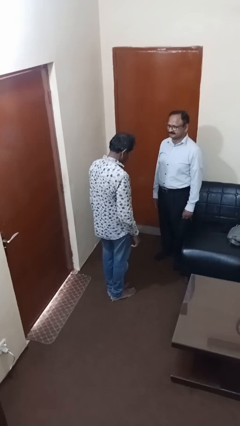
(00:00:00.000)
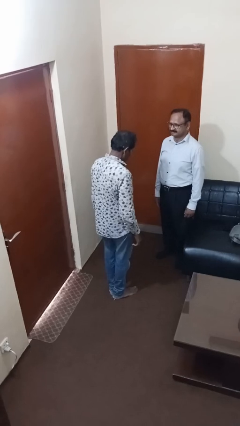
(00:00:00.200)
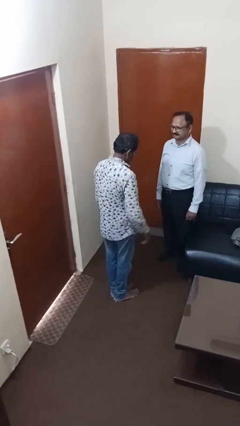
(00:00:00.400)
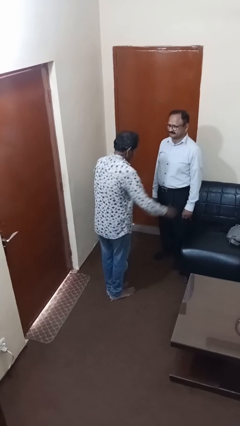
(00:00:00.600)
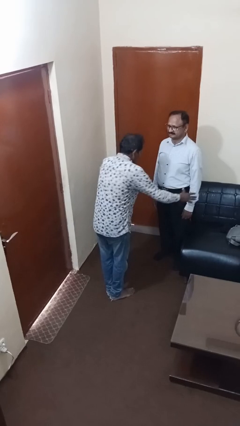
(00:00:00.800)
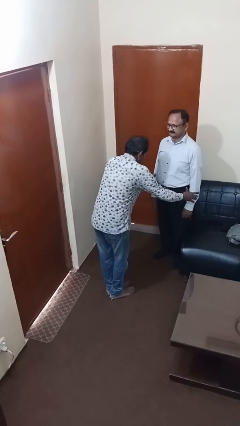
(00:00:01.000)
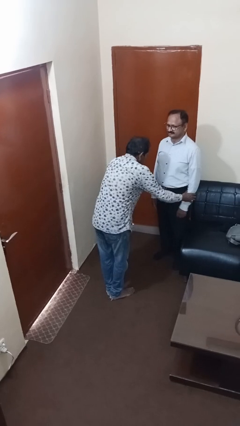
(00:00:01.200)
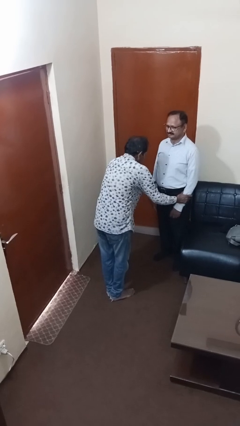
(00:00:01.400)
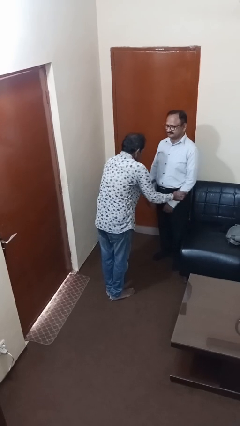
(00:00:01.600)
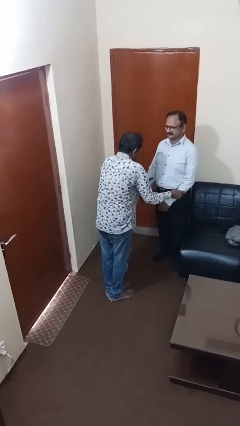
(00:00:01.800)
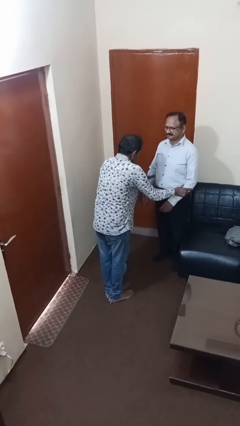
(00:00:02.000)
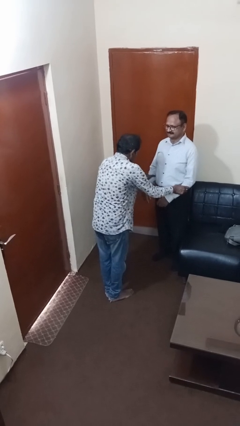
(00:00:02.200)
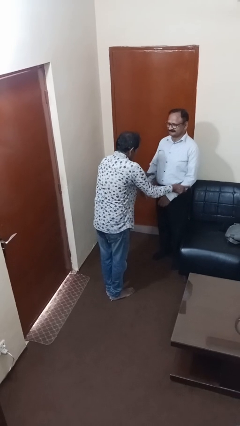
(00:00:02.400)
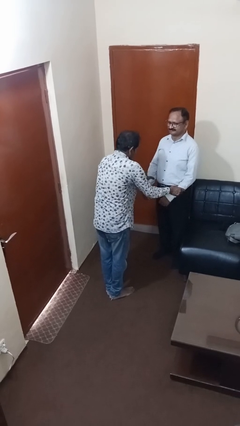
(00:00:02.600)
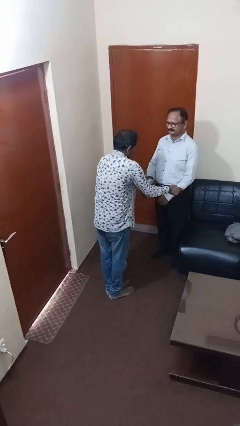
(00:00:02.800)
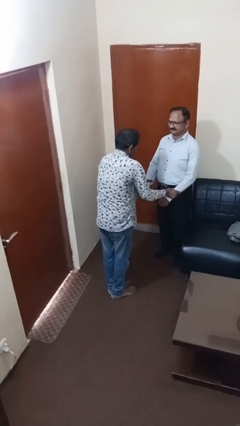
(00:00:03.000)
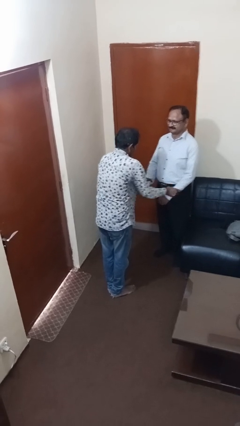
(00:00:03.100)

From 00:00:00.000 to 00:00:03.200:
person grabs person by forearm

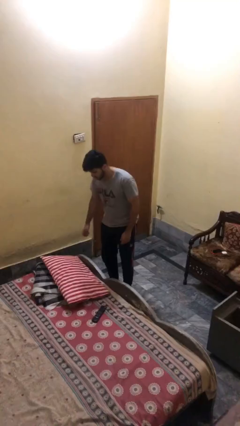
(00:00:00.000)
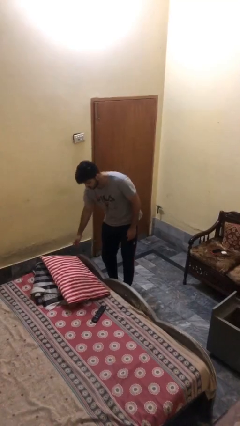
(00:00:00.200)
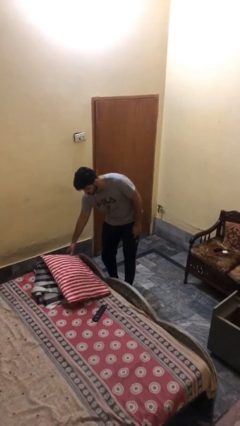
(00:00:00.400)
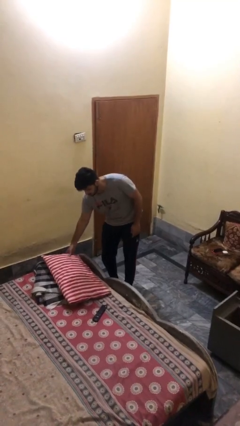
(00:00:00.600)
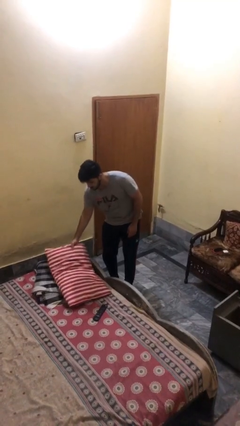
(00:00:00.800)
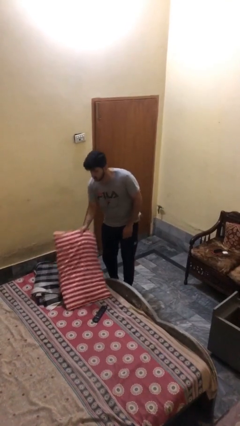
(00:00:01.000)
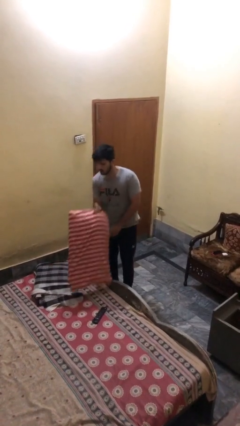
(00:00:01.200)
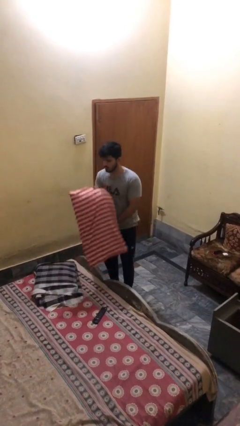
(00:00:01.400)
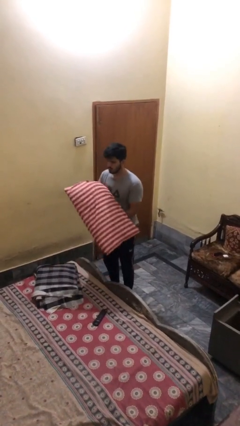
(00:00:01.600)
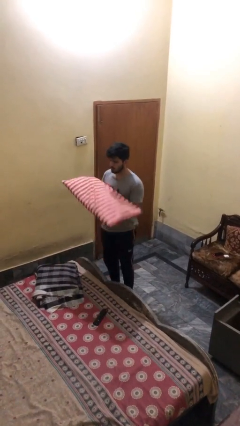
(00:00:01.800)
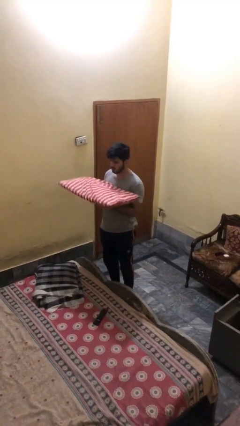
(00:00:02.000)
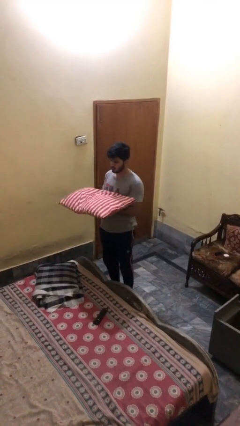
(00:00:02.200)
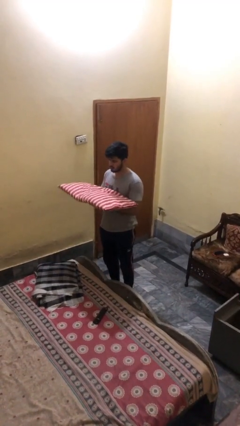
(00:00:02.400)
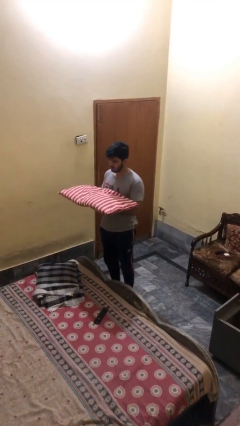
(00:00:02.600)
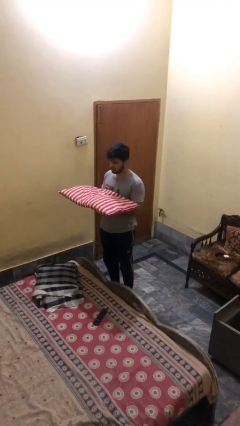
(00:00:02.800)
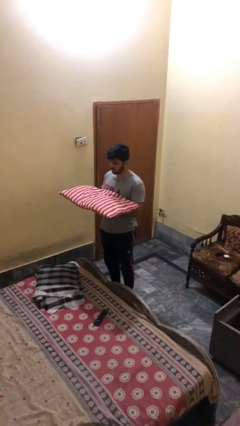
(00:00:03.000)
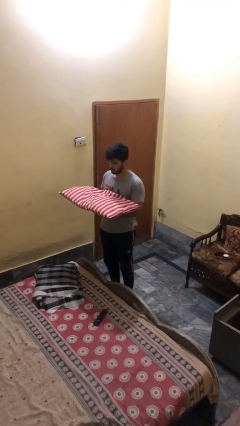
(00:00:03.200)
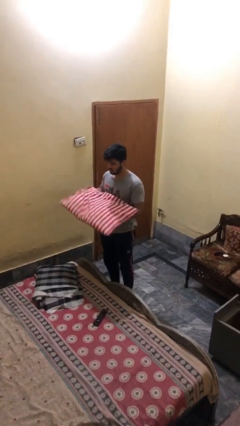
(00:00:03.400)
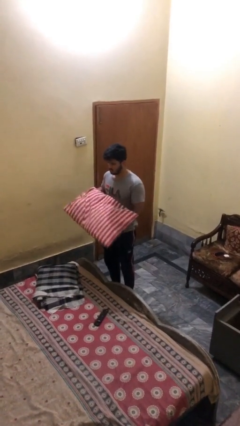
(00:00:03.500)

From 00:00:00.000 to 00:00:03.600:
person picks up object from bed

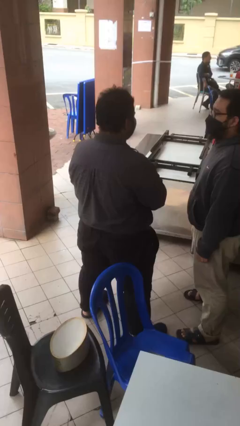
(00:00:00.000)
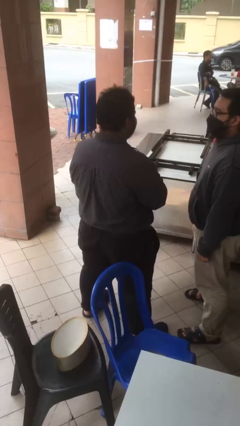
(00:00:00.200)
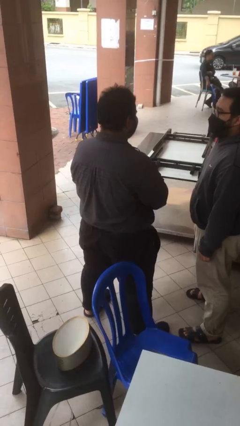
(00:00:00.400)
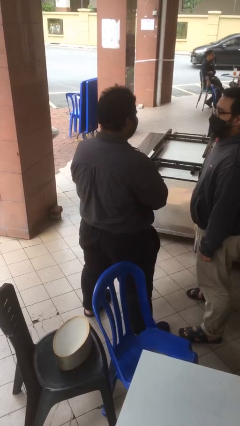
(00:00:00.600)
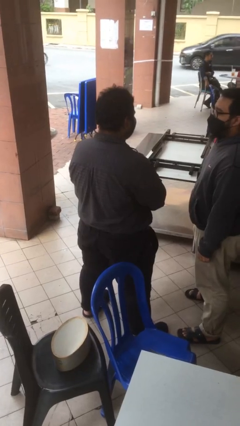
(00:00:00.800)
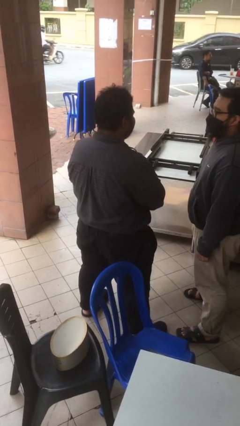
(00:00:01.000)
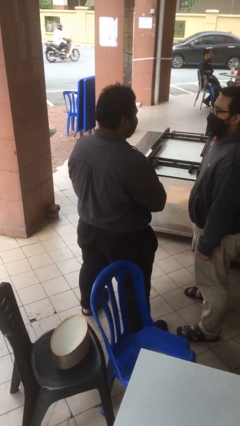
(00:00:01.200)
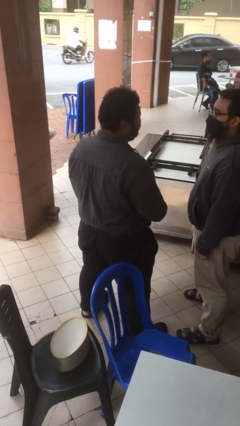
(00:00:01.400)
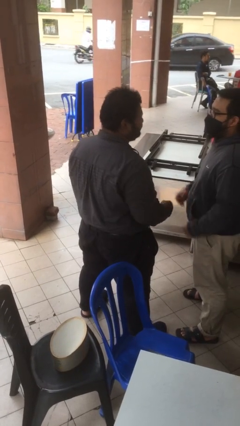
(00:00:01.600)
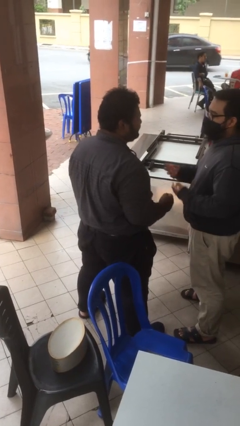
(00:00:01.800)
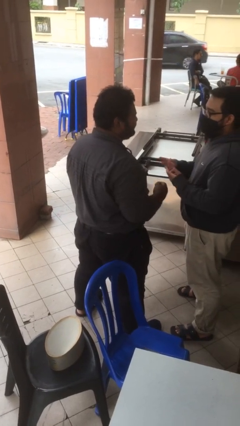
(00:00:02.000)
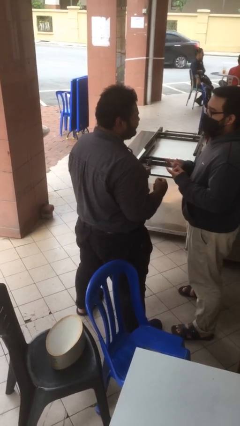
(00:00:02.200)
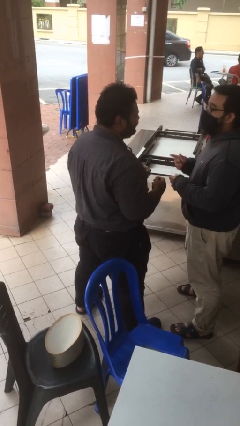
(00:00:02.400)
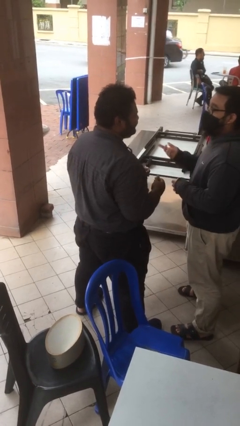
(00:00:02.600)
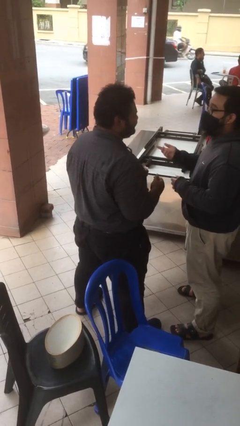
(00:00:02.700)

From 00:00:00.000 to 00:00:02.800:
person talks to person

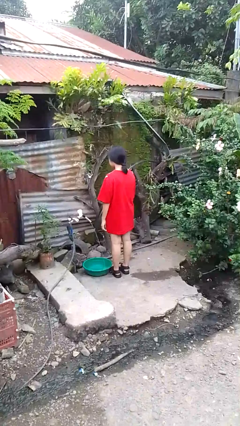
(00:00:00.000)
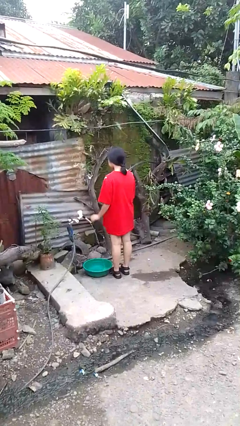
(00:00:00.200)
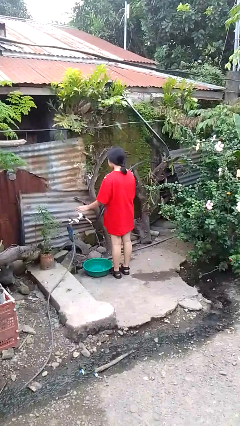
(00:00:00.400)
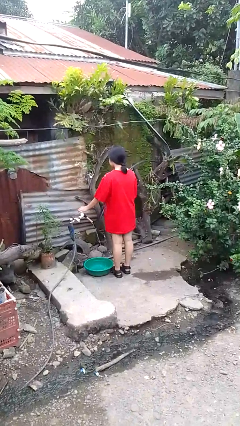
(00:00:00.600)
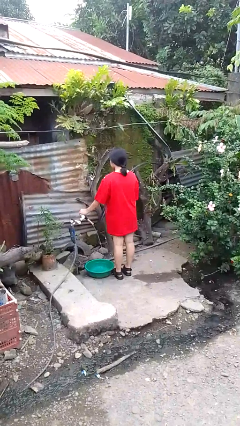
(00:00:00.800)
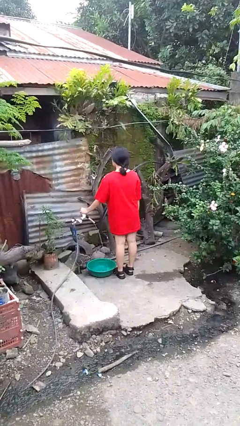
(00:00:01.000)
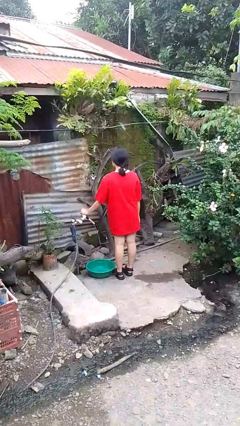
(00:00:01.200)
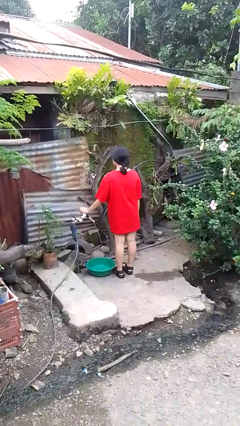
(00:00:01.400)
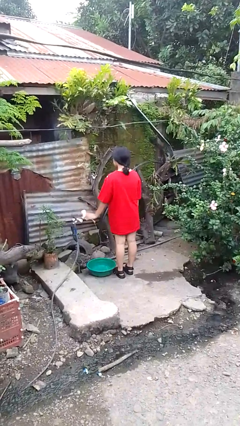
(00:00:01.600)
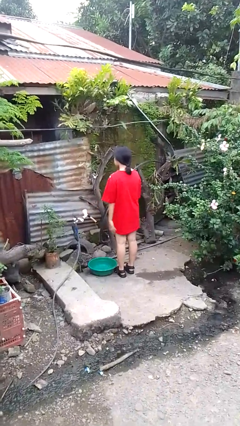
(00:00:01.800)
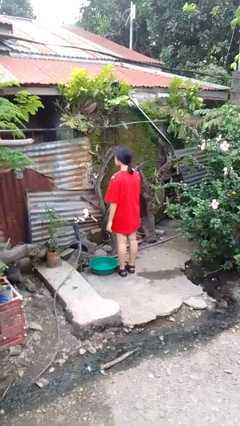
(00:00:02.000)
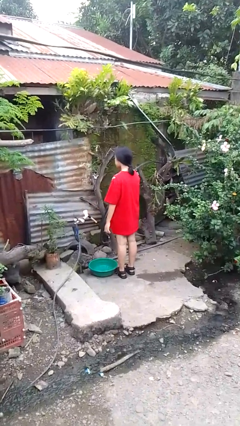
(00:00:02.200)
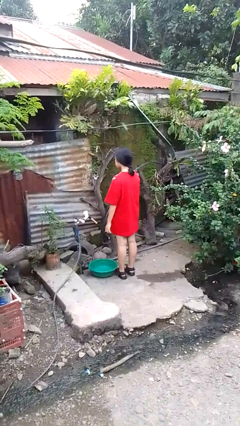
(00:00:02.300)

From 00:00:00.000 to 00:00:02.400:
person turns off faucet

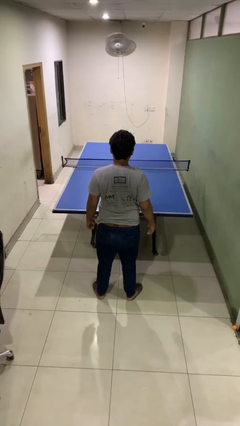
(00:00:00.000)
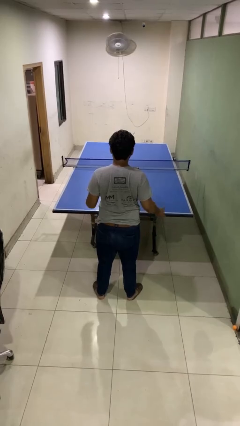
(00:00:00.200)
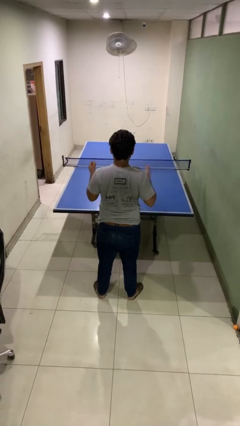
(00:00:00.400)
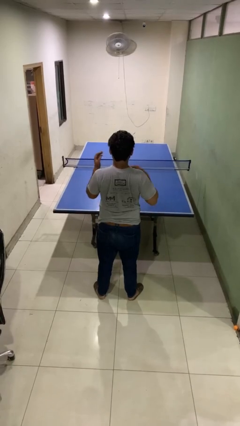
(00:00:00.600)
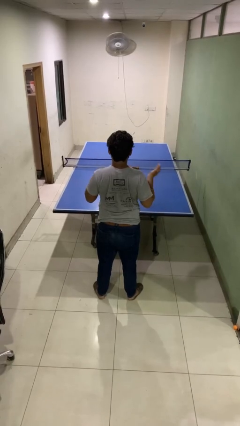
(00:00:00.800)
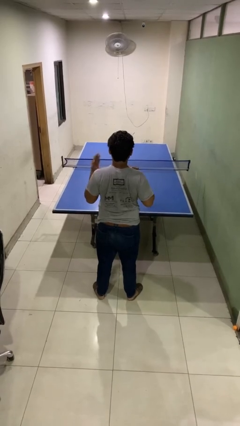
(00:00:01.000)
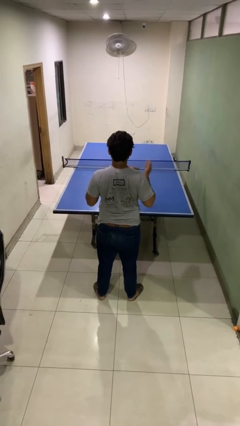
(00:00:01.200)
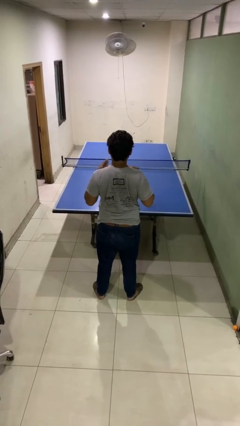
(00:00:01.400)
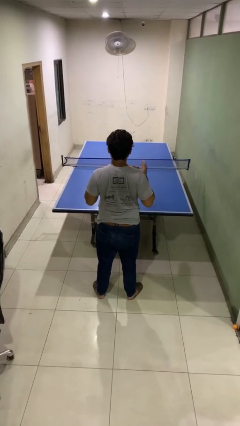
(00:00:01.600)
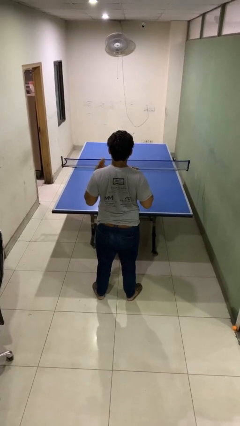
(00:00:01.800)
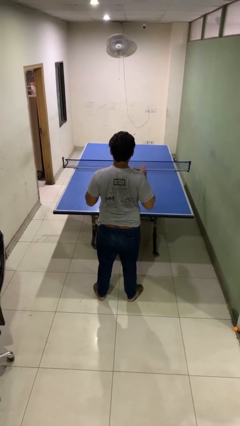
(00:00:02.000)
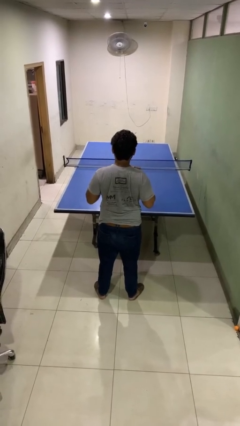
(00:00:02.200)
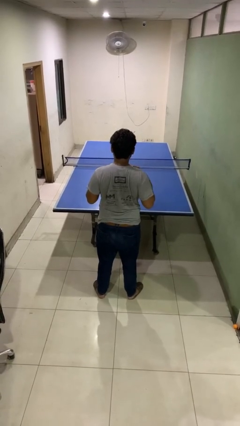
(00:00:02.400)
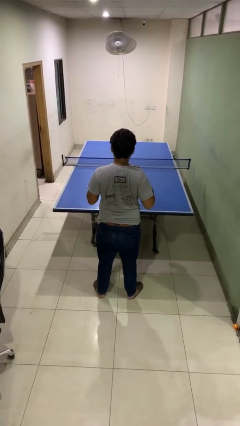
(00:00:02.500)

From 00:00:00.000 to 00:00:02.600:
person drums on chest

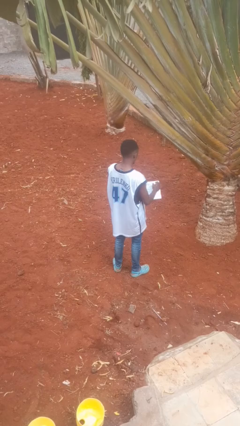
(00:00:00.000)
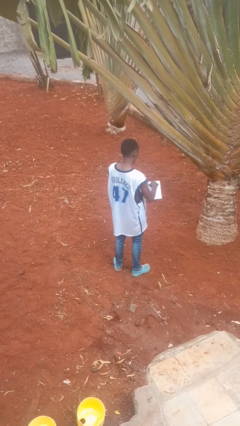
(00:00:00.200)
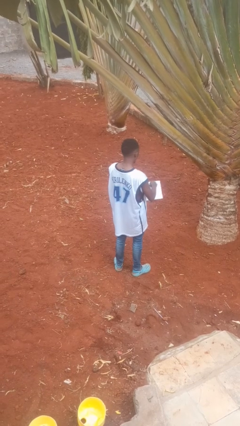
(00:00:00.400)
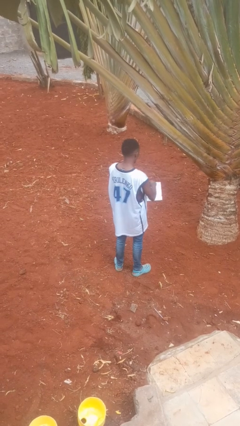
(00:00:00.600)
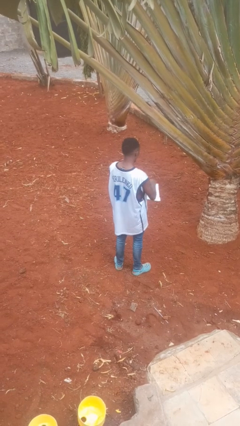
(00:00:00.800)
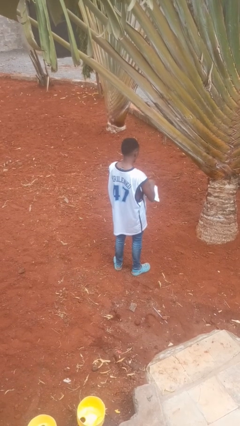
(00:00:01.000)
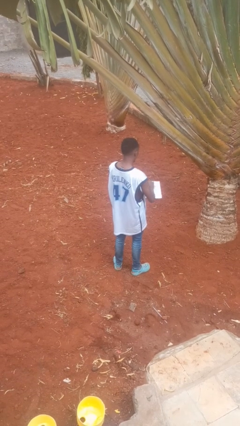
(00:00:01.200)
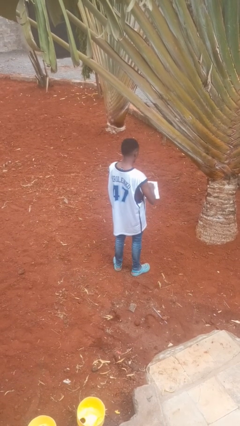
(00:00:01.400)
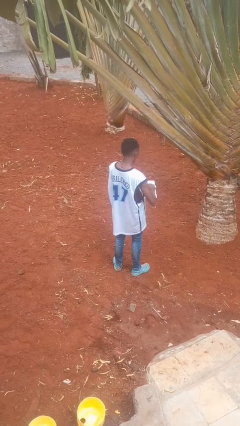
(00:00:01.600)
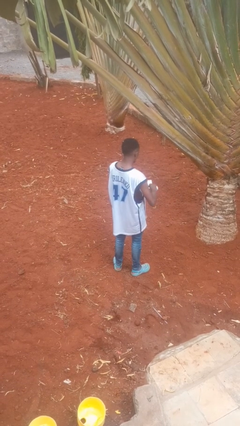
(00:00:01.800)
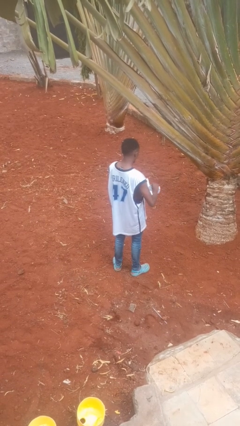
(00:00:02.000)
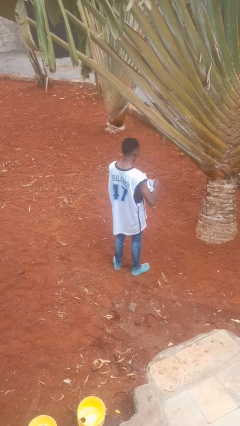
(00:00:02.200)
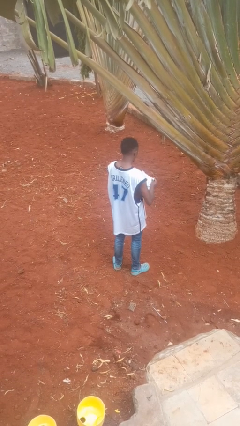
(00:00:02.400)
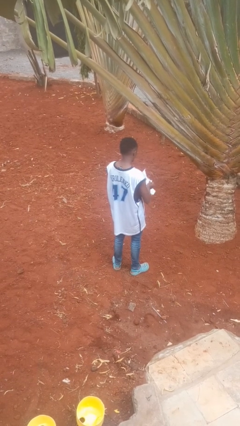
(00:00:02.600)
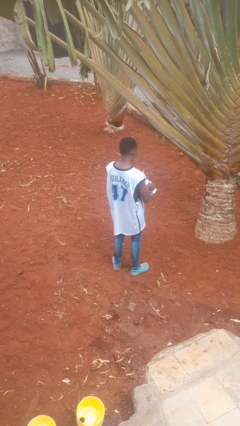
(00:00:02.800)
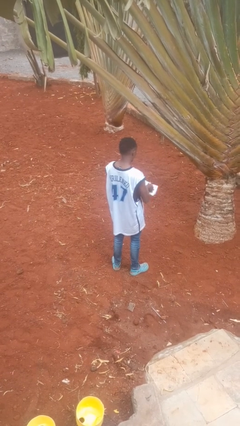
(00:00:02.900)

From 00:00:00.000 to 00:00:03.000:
person tears paper
